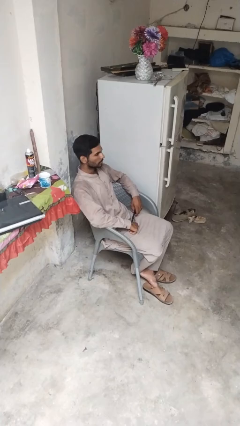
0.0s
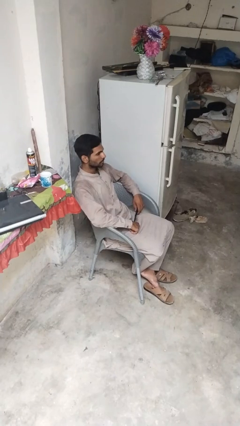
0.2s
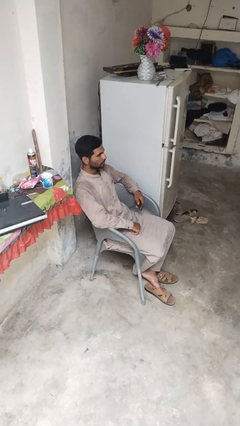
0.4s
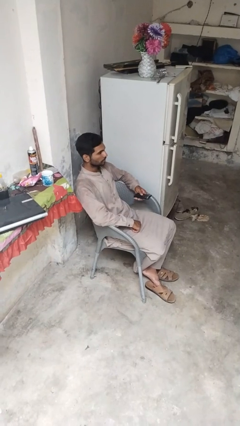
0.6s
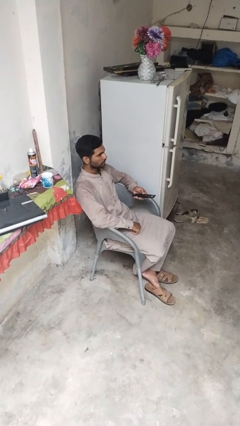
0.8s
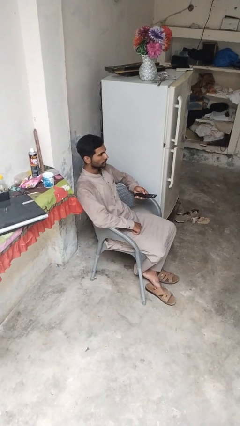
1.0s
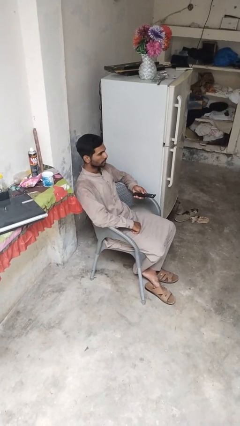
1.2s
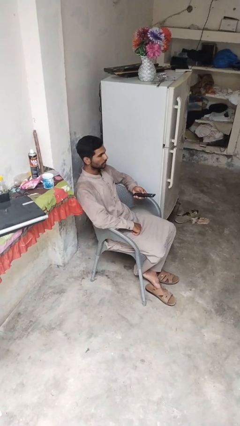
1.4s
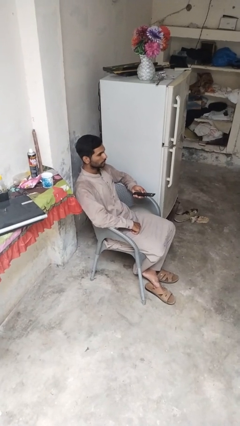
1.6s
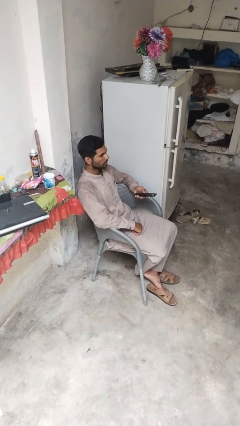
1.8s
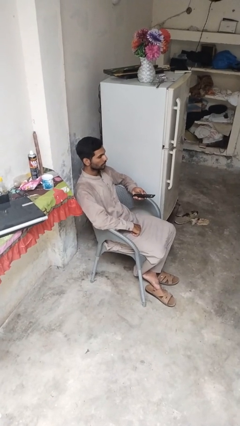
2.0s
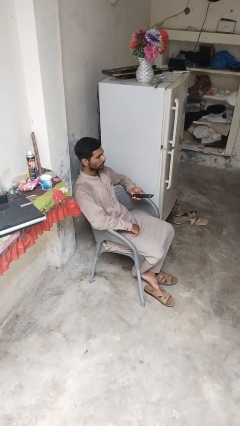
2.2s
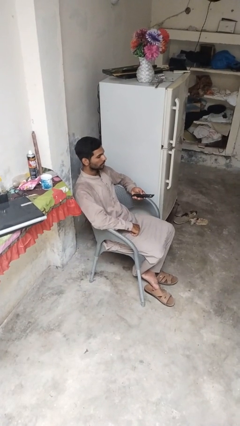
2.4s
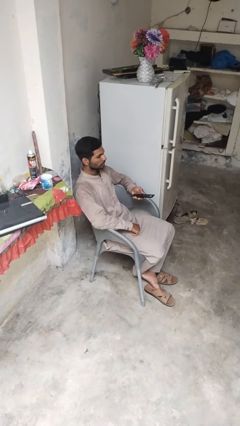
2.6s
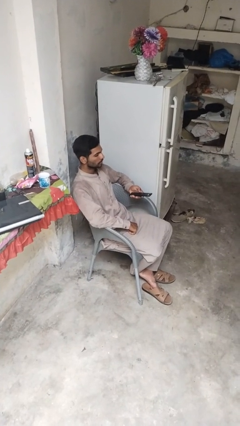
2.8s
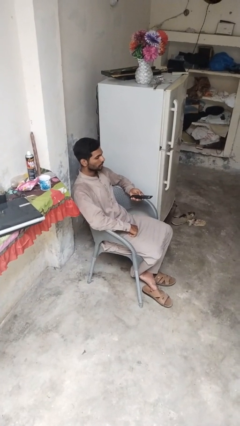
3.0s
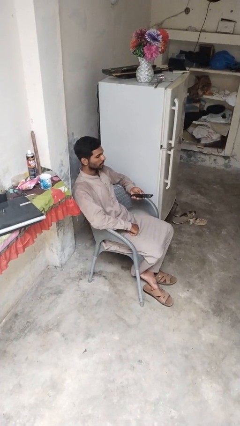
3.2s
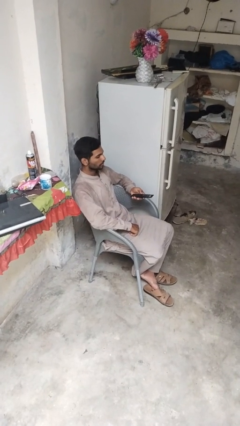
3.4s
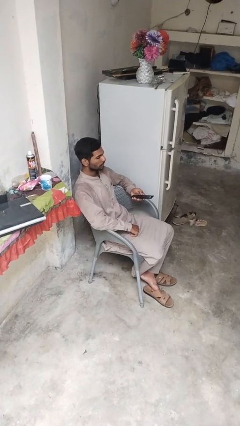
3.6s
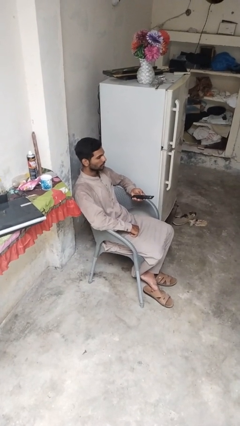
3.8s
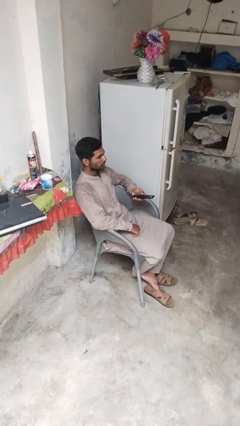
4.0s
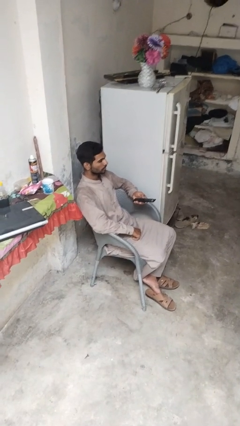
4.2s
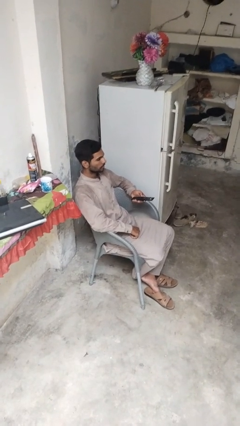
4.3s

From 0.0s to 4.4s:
person uses television remote

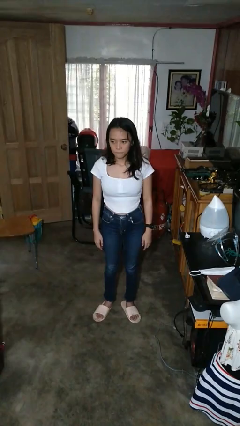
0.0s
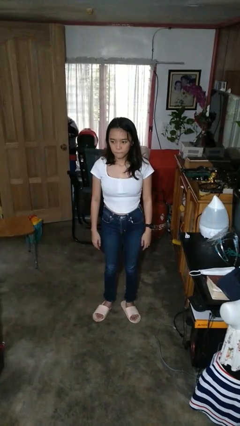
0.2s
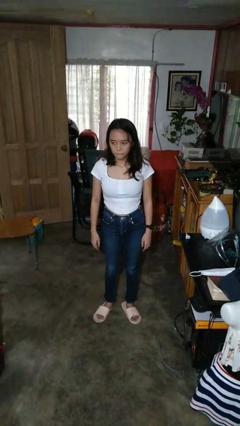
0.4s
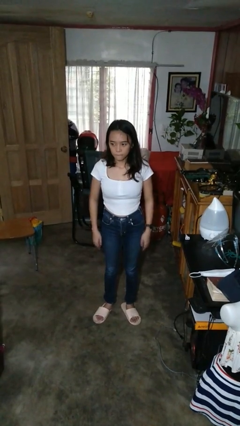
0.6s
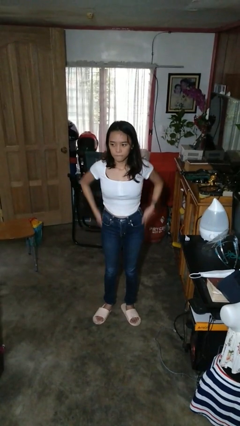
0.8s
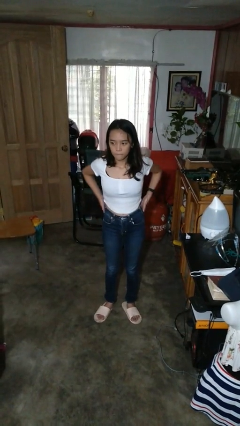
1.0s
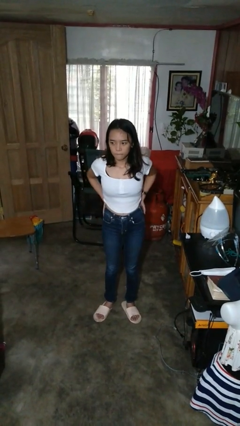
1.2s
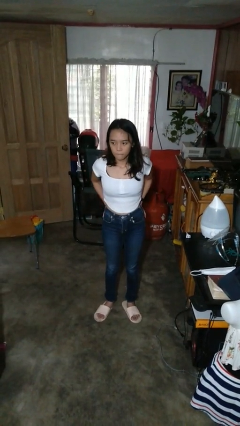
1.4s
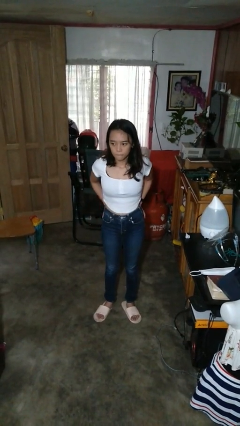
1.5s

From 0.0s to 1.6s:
person puts hands in back pockets

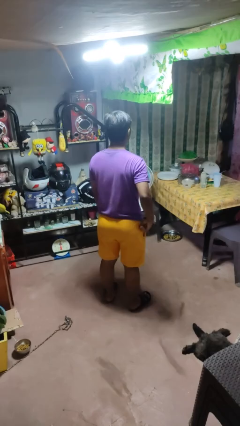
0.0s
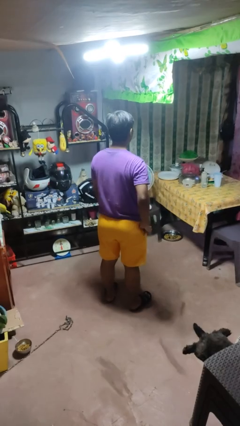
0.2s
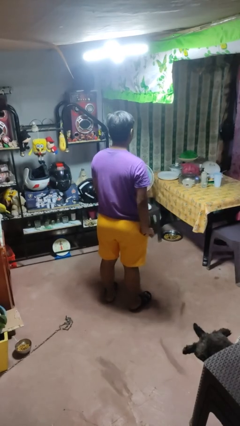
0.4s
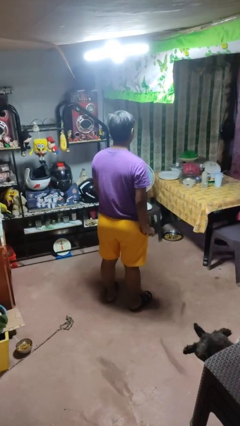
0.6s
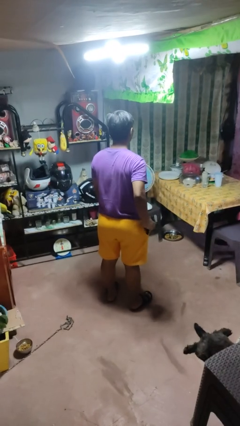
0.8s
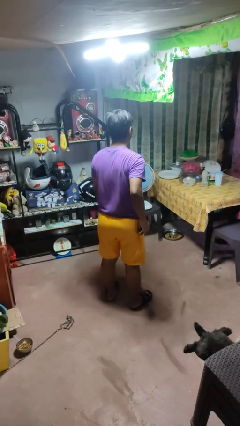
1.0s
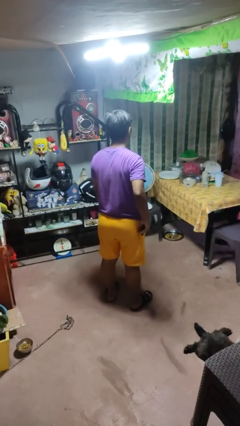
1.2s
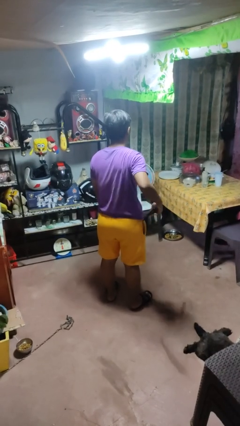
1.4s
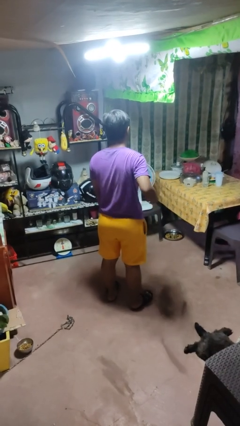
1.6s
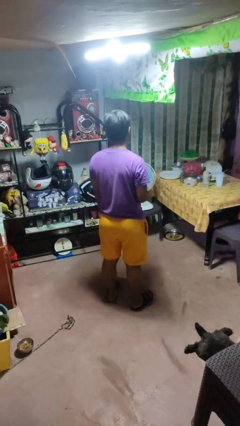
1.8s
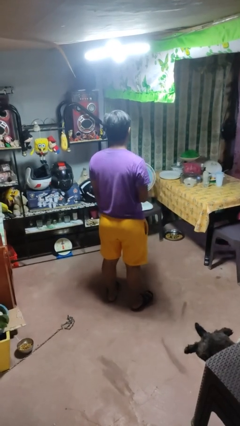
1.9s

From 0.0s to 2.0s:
person takes phone from pocket

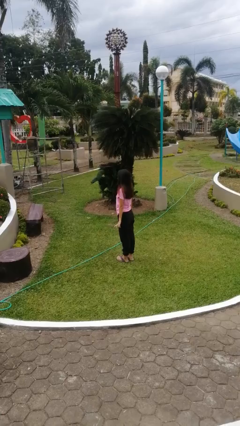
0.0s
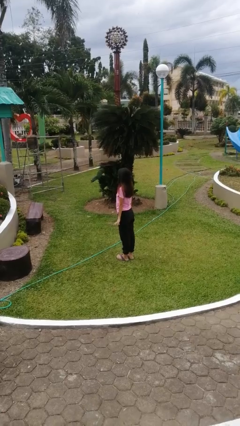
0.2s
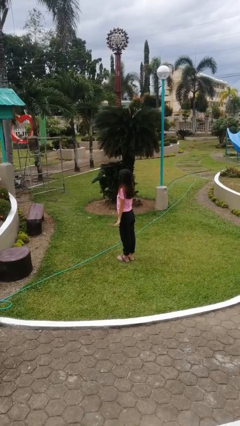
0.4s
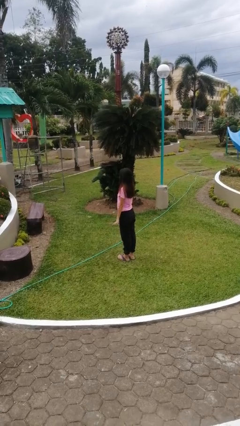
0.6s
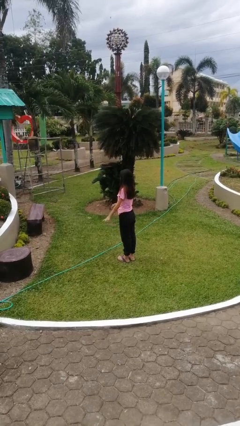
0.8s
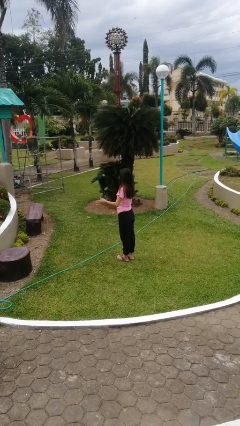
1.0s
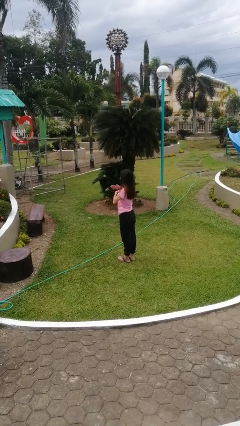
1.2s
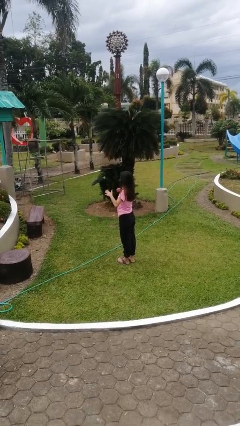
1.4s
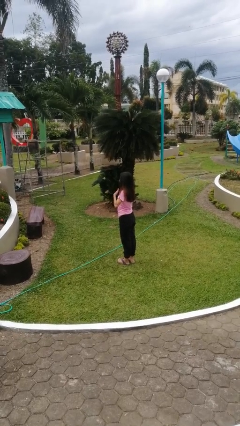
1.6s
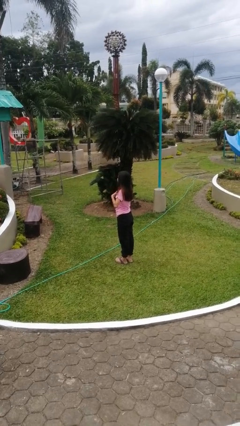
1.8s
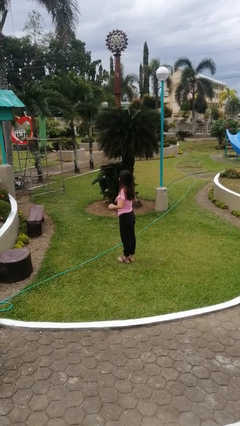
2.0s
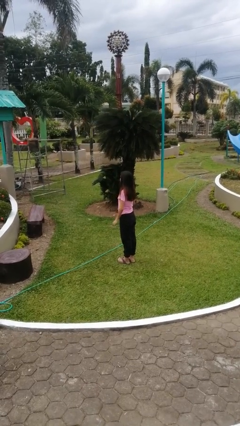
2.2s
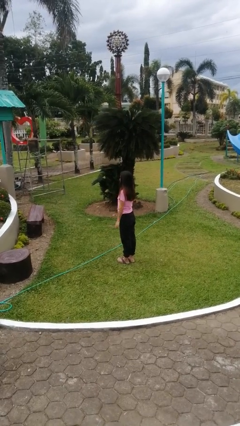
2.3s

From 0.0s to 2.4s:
person drums on chest

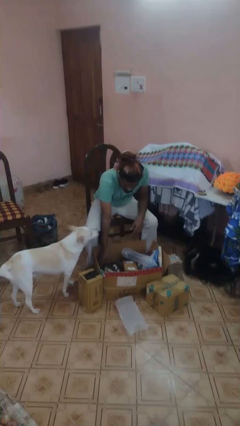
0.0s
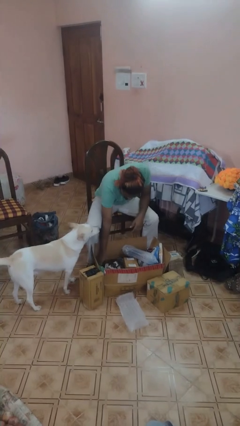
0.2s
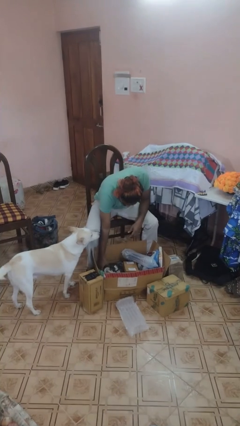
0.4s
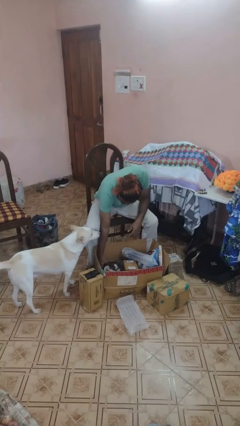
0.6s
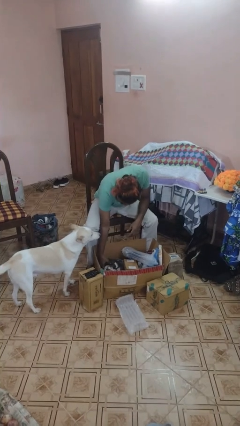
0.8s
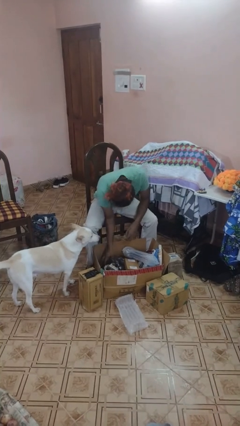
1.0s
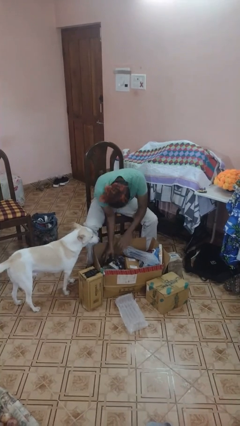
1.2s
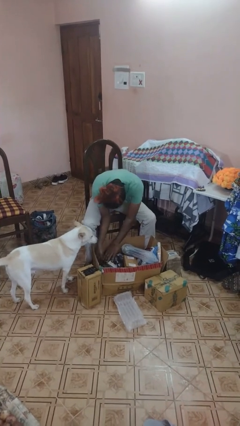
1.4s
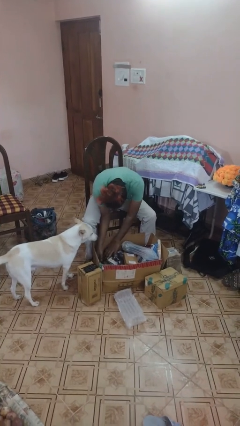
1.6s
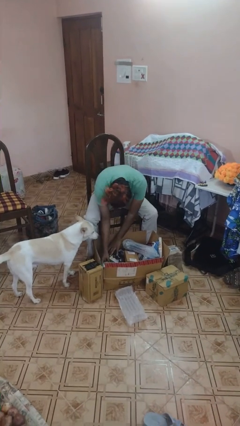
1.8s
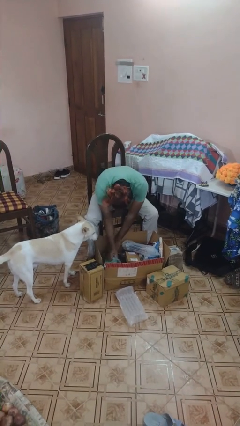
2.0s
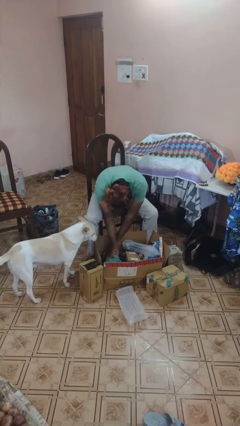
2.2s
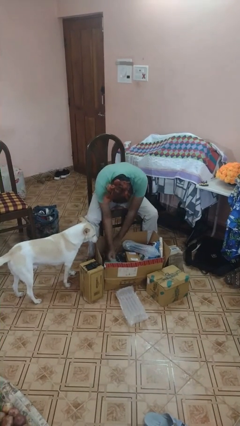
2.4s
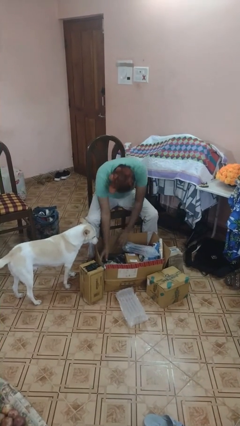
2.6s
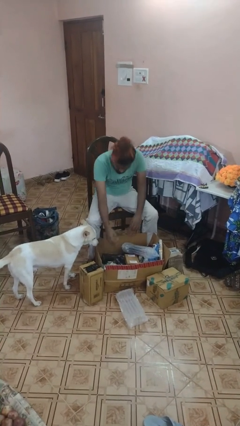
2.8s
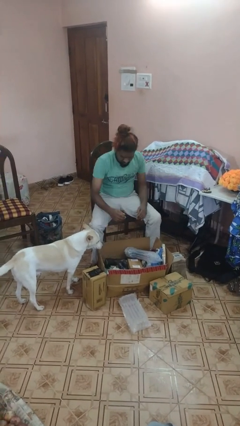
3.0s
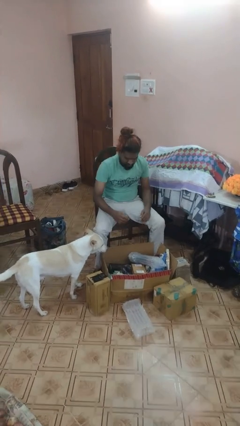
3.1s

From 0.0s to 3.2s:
person searches in box

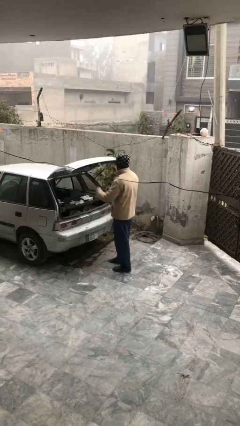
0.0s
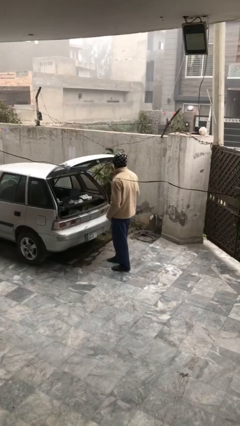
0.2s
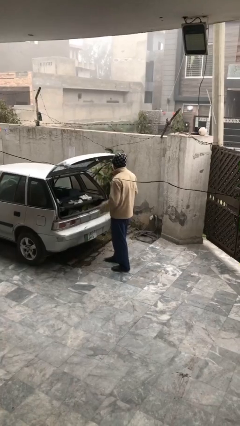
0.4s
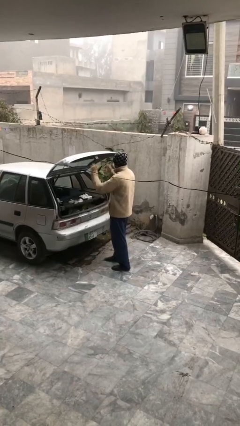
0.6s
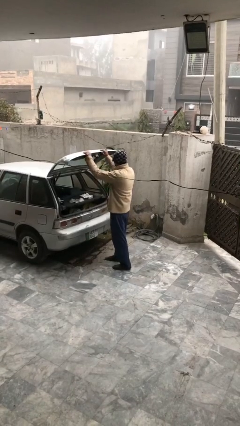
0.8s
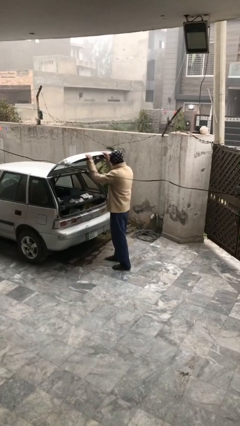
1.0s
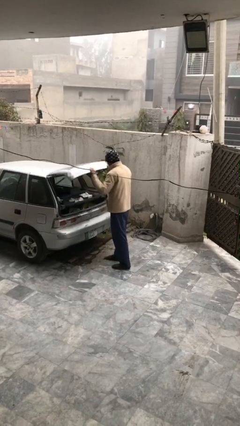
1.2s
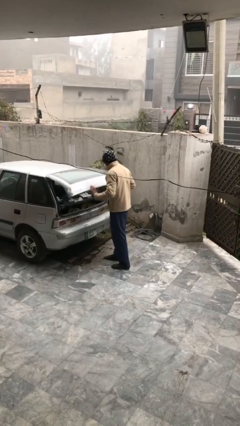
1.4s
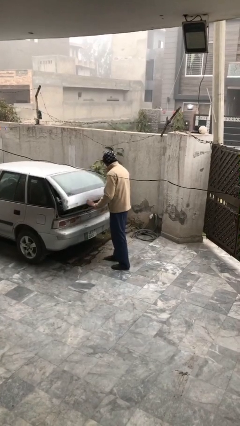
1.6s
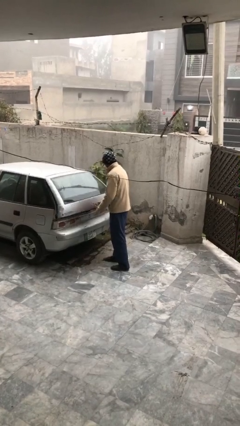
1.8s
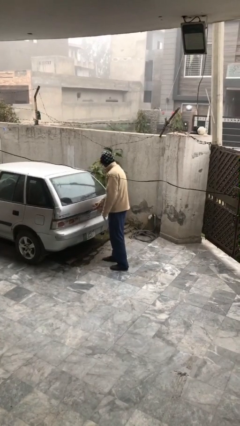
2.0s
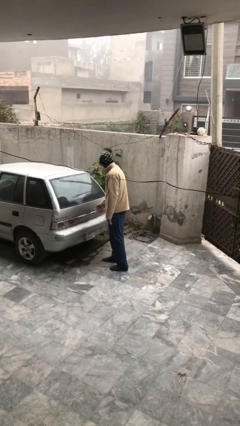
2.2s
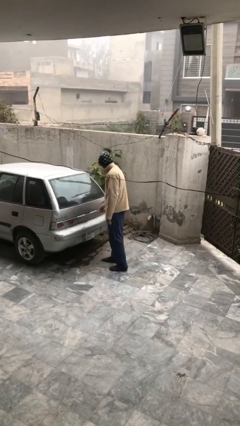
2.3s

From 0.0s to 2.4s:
person closes car trunk

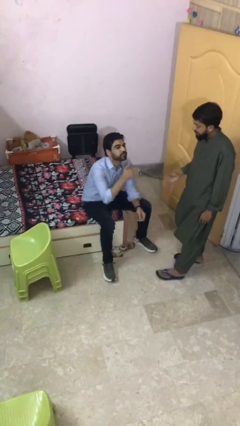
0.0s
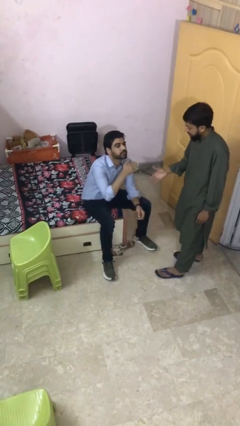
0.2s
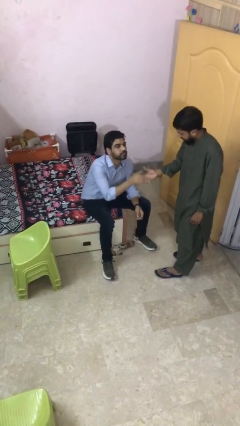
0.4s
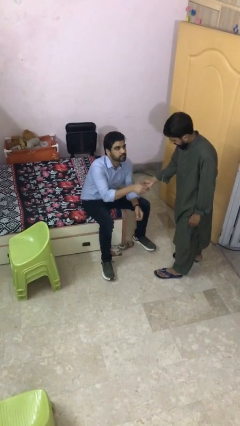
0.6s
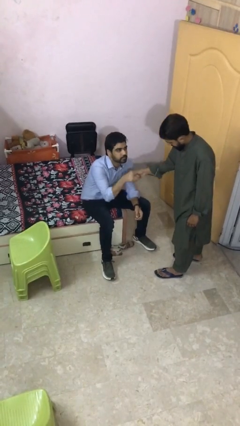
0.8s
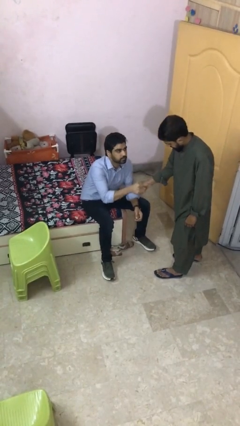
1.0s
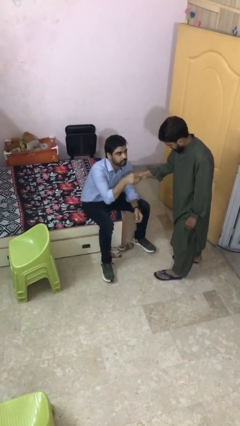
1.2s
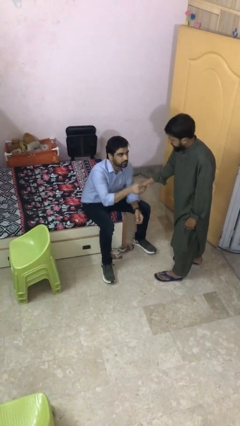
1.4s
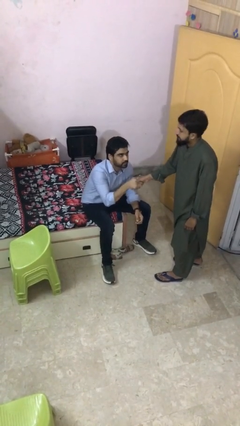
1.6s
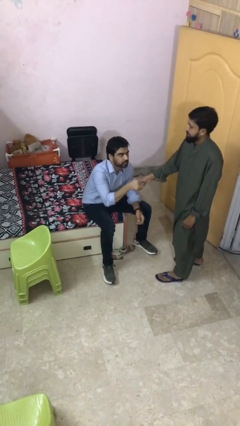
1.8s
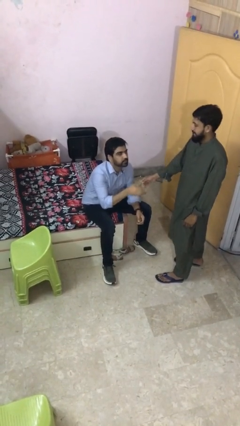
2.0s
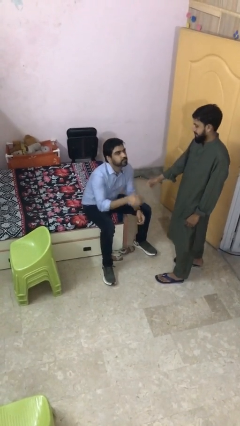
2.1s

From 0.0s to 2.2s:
person shakes hand
